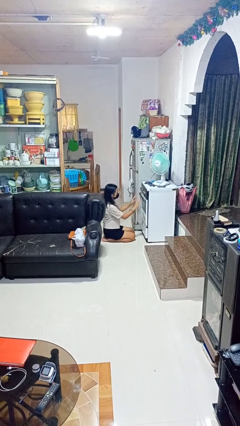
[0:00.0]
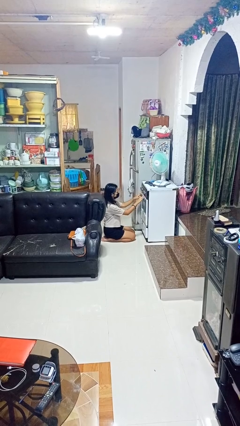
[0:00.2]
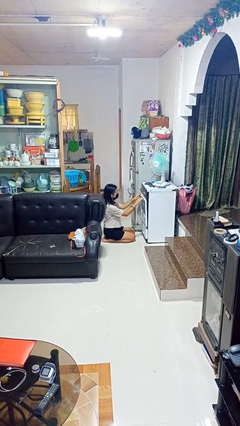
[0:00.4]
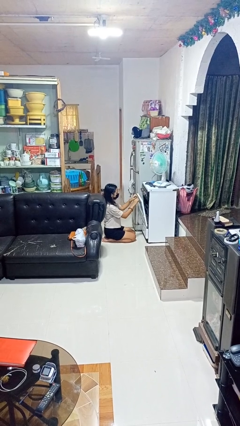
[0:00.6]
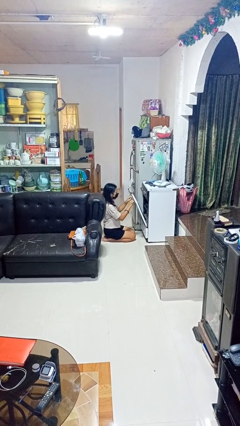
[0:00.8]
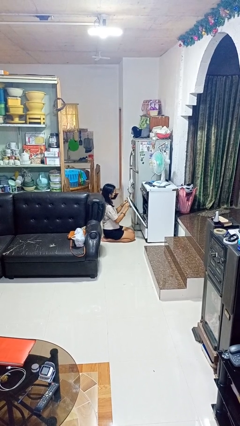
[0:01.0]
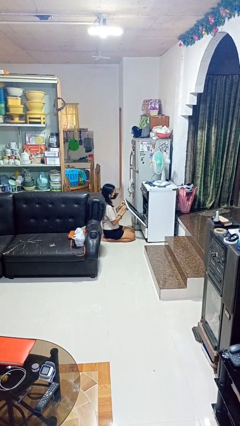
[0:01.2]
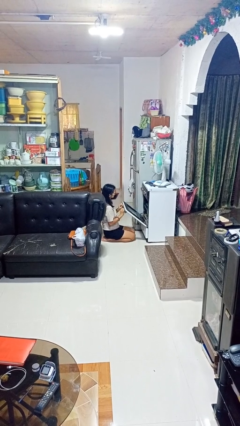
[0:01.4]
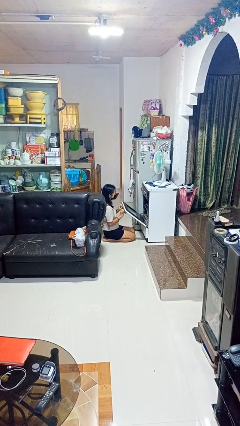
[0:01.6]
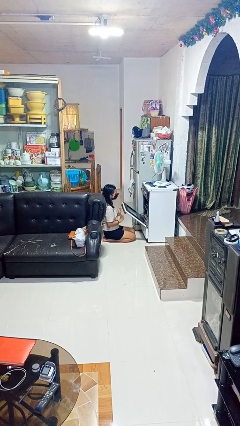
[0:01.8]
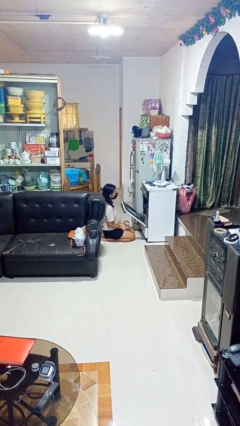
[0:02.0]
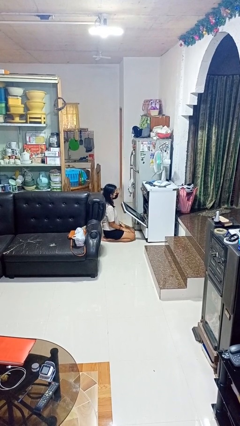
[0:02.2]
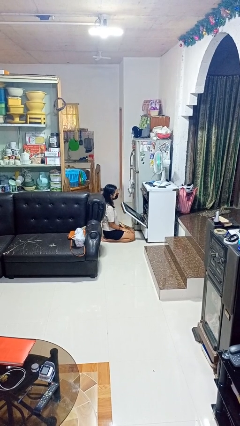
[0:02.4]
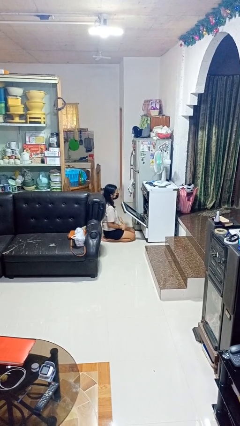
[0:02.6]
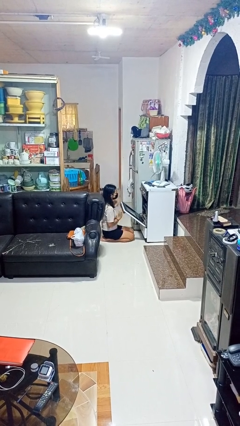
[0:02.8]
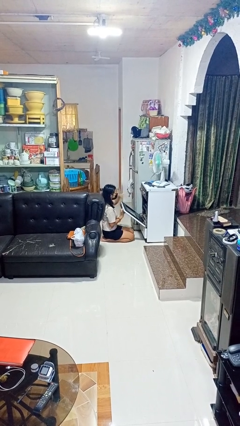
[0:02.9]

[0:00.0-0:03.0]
person opens oven door

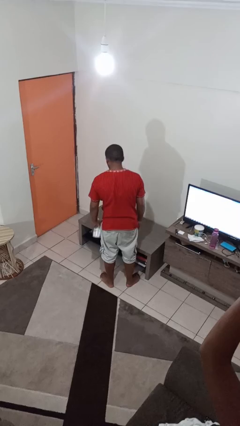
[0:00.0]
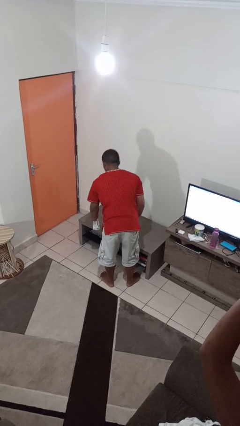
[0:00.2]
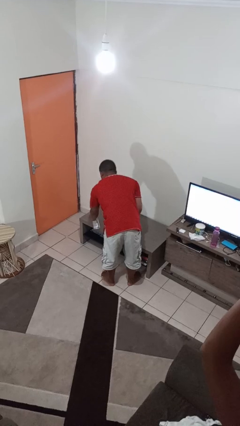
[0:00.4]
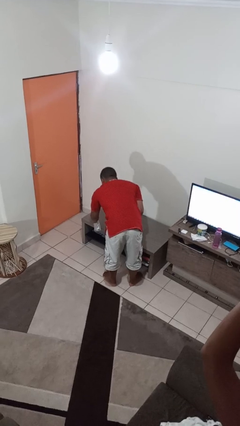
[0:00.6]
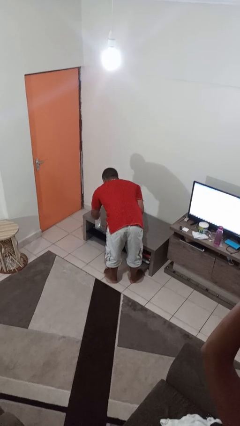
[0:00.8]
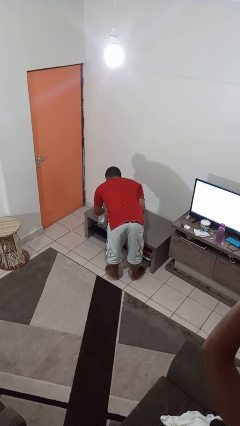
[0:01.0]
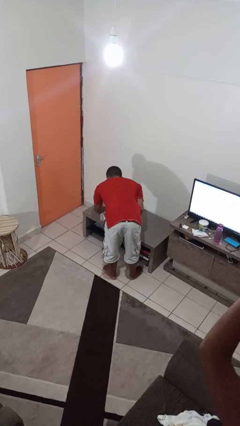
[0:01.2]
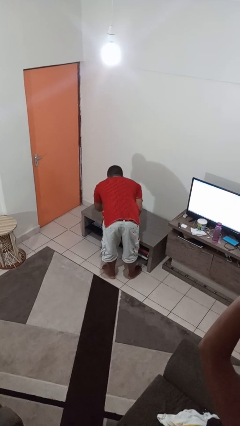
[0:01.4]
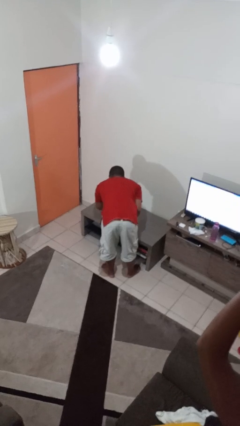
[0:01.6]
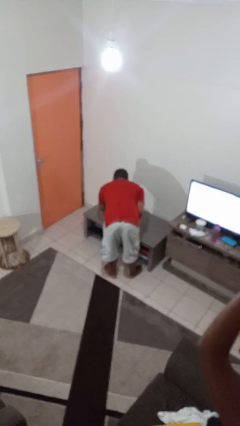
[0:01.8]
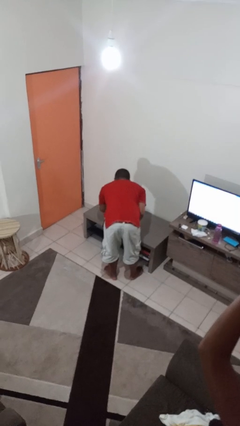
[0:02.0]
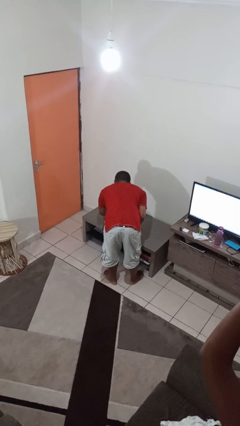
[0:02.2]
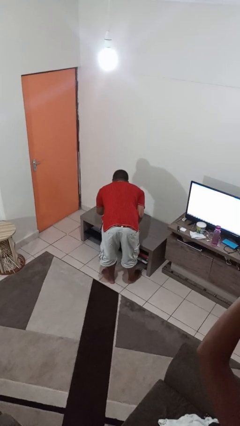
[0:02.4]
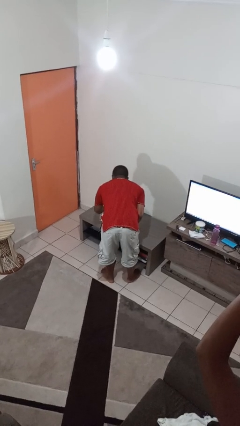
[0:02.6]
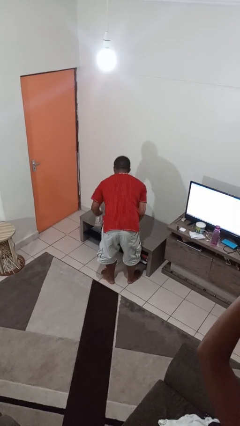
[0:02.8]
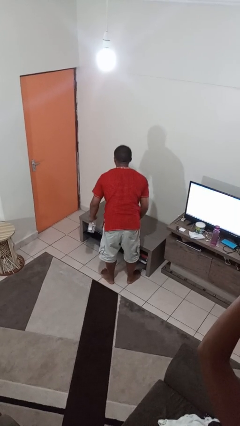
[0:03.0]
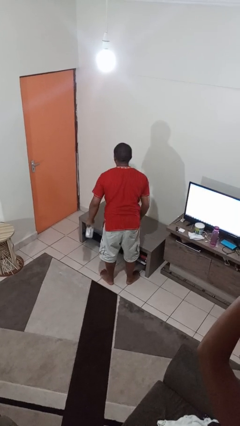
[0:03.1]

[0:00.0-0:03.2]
person sprays from bottle

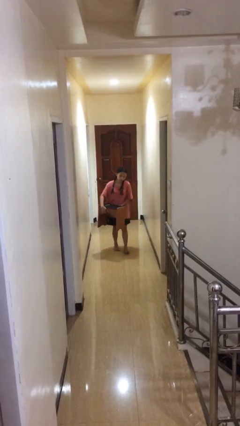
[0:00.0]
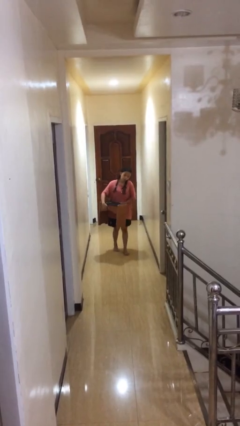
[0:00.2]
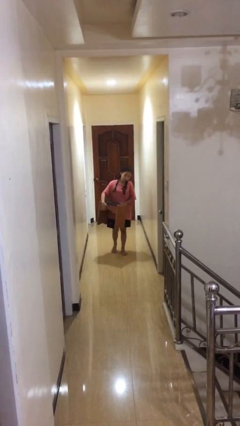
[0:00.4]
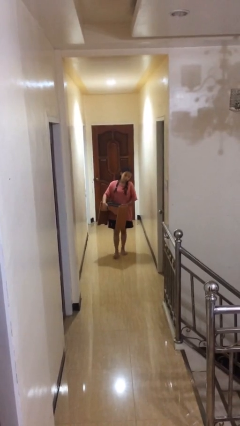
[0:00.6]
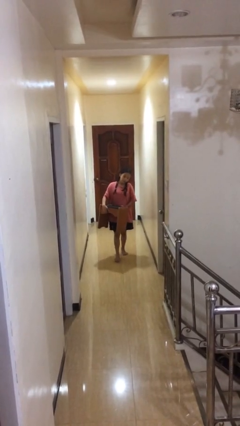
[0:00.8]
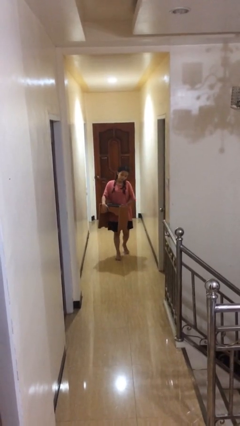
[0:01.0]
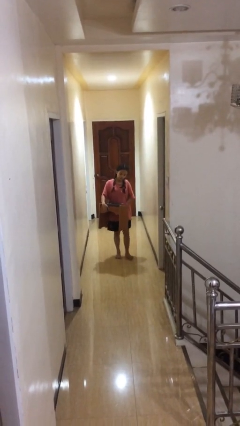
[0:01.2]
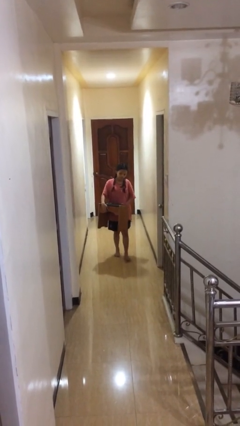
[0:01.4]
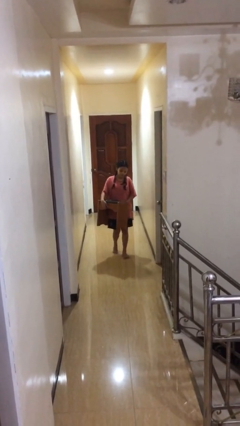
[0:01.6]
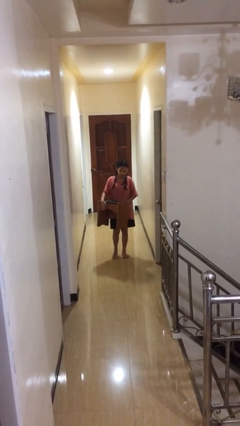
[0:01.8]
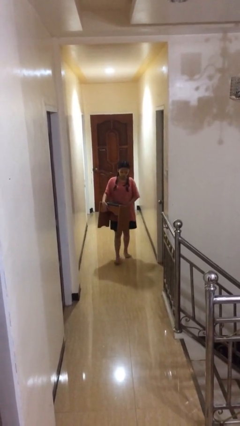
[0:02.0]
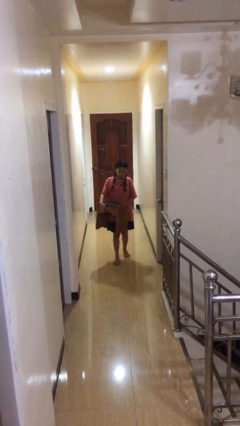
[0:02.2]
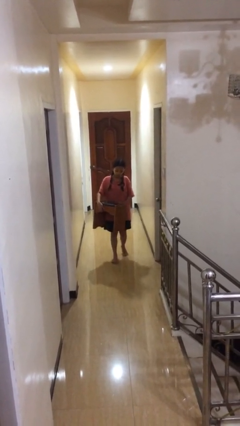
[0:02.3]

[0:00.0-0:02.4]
person carries heavy object

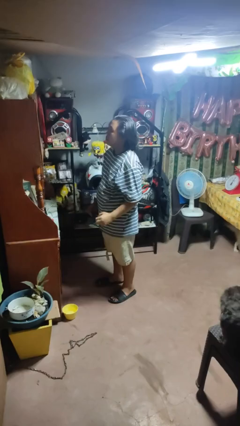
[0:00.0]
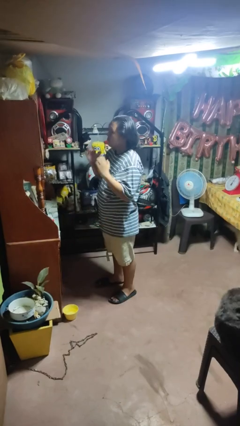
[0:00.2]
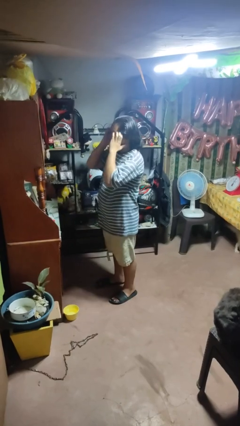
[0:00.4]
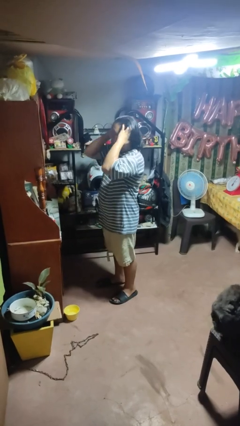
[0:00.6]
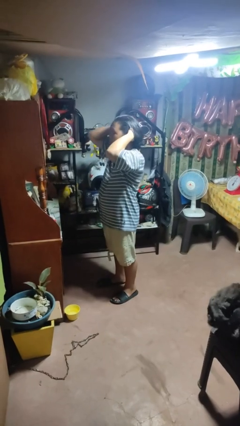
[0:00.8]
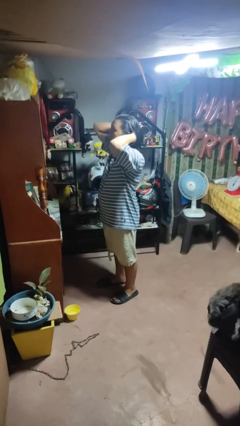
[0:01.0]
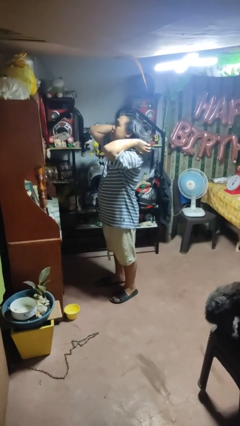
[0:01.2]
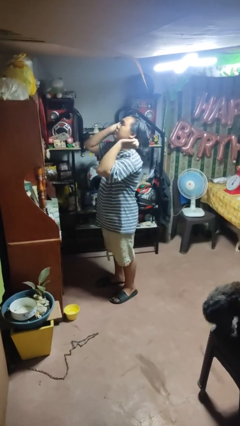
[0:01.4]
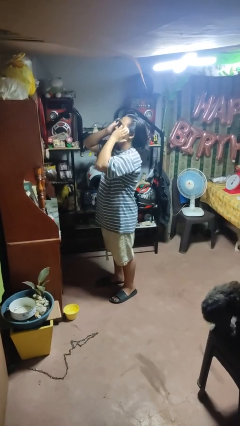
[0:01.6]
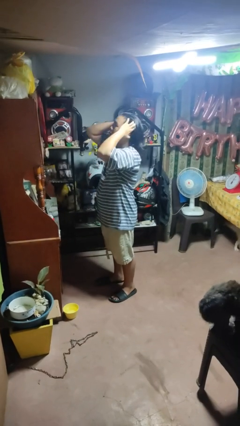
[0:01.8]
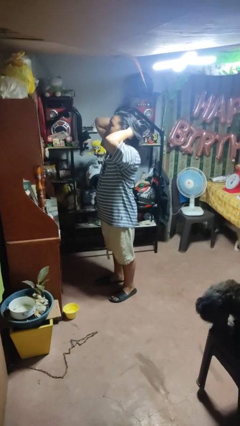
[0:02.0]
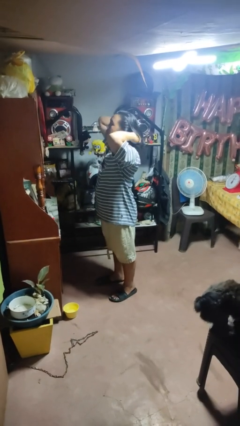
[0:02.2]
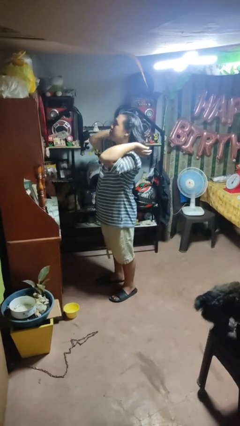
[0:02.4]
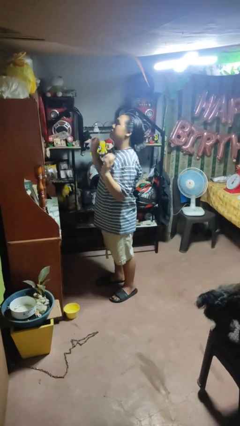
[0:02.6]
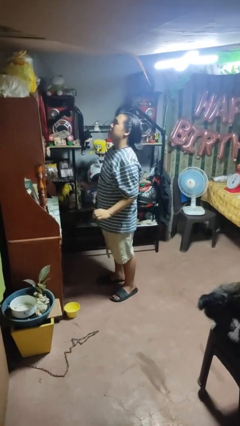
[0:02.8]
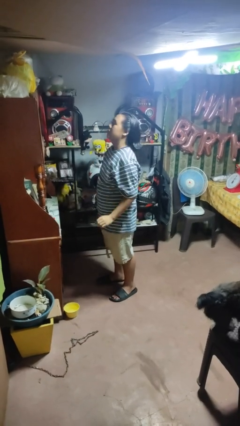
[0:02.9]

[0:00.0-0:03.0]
person strokes hair

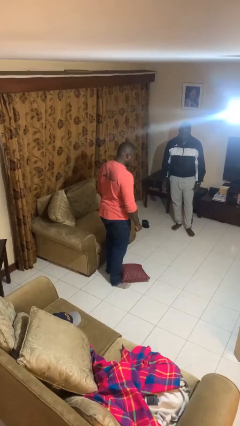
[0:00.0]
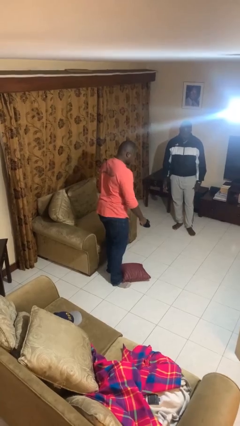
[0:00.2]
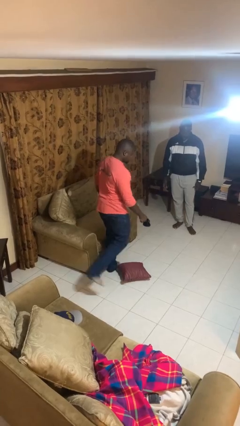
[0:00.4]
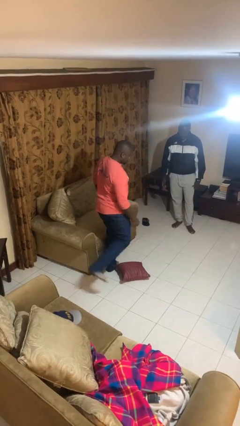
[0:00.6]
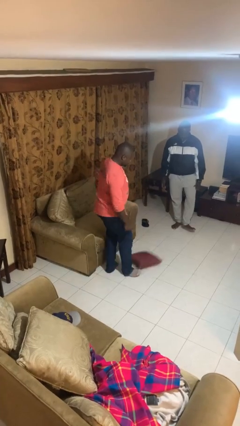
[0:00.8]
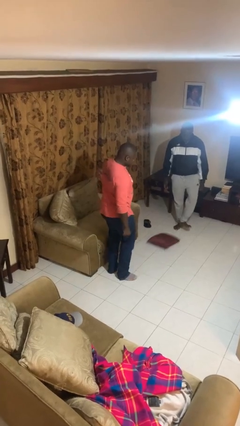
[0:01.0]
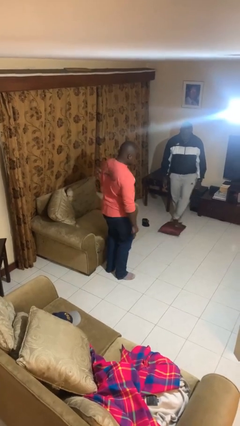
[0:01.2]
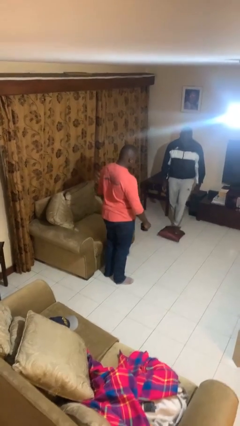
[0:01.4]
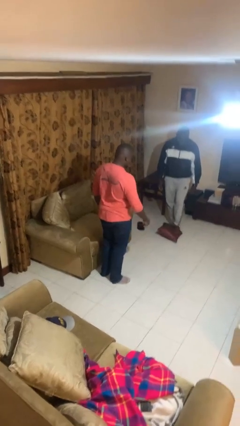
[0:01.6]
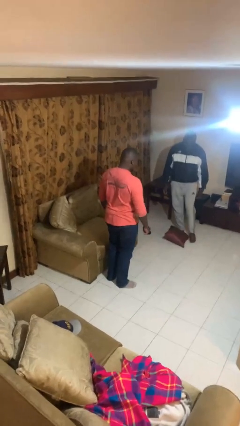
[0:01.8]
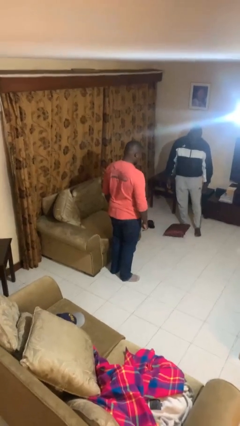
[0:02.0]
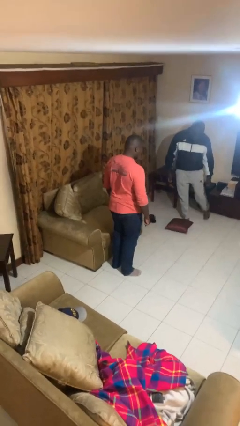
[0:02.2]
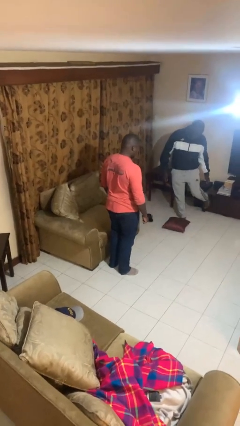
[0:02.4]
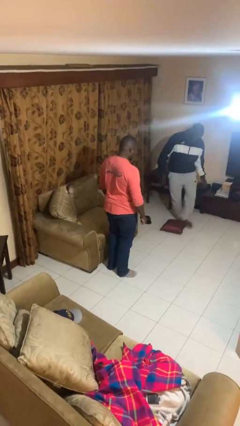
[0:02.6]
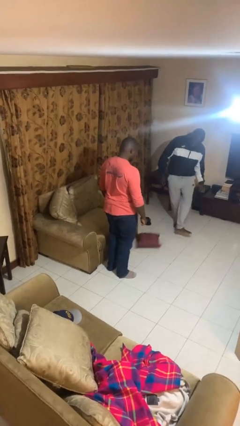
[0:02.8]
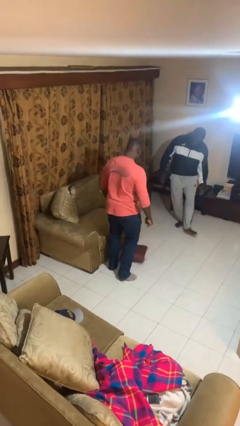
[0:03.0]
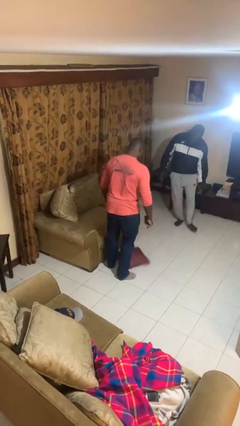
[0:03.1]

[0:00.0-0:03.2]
person kicks object to person

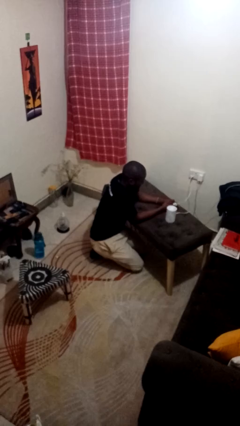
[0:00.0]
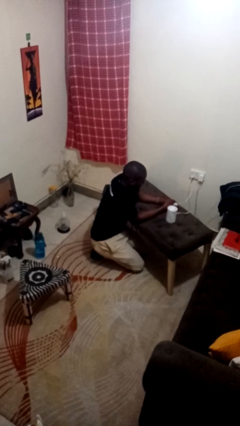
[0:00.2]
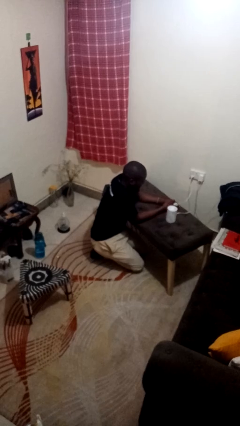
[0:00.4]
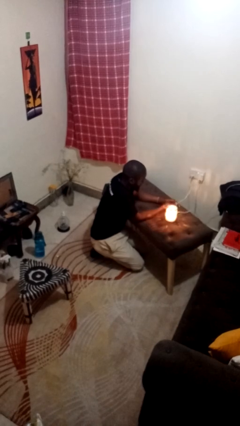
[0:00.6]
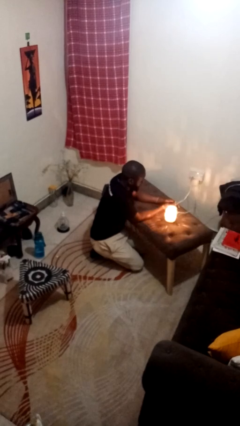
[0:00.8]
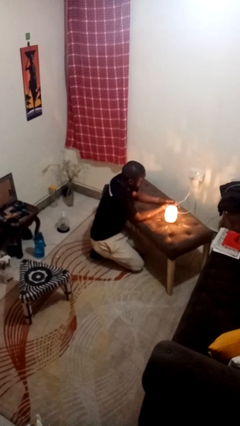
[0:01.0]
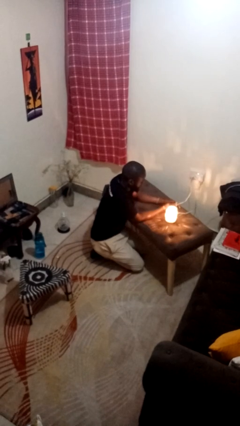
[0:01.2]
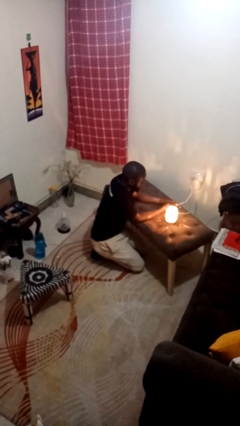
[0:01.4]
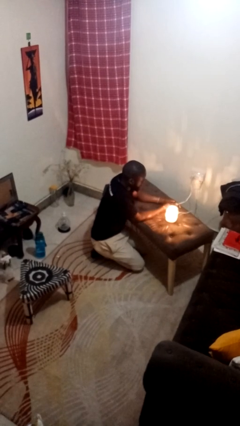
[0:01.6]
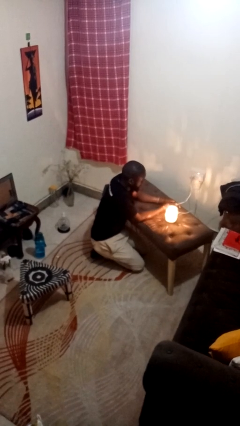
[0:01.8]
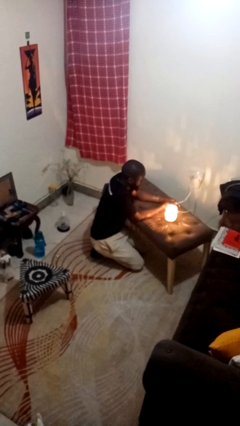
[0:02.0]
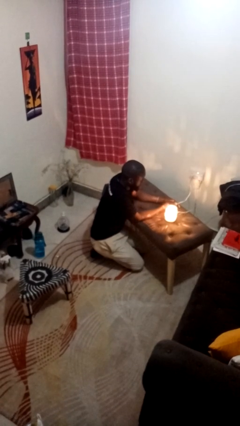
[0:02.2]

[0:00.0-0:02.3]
person turns on lamp
